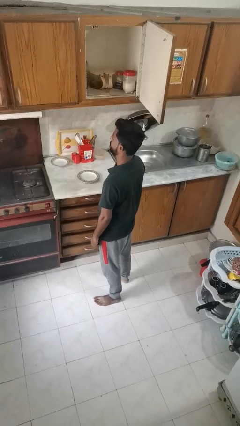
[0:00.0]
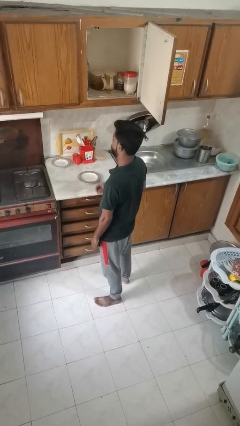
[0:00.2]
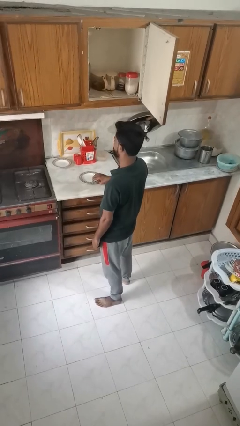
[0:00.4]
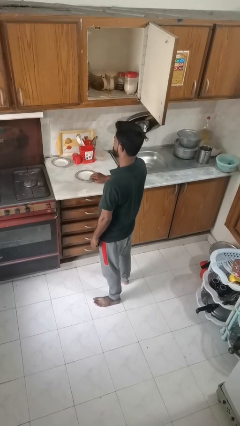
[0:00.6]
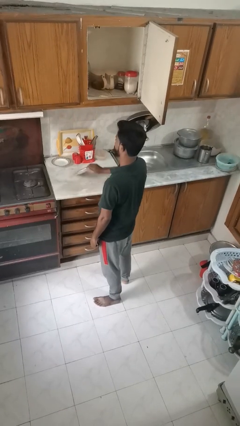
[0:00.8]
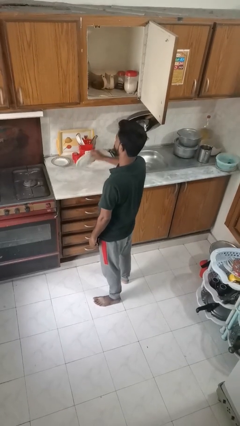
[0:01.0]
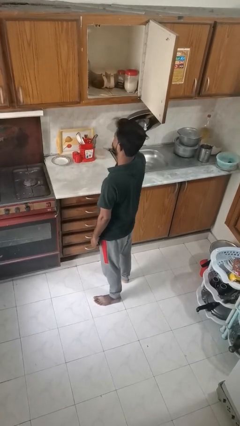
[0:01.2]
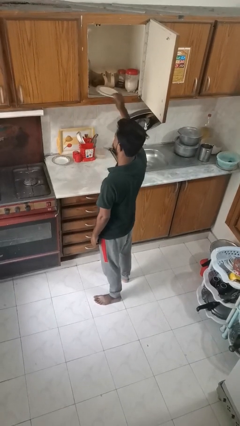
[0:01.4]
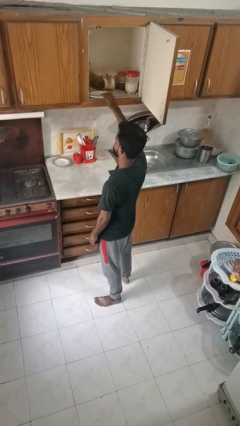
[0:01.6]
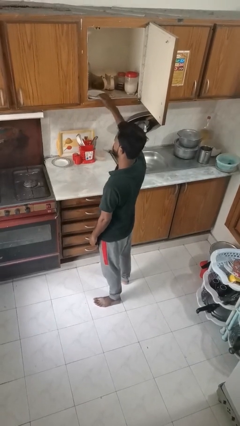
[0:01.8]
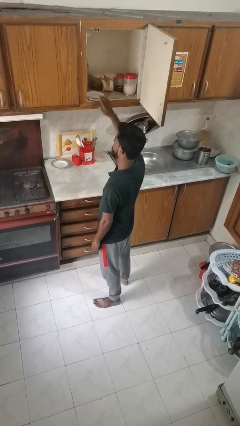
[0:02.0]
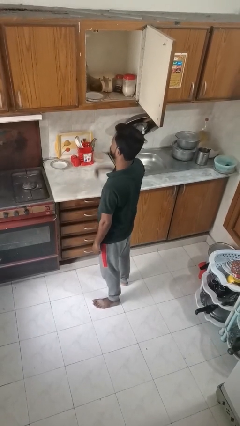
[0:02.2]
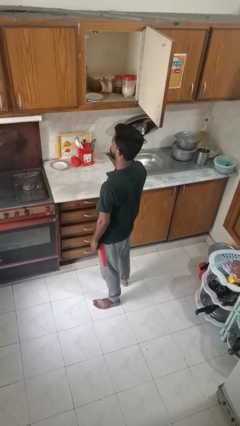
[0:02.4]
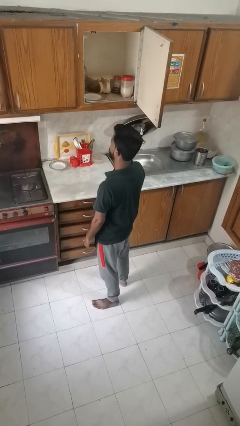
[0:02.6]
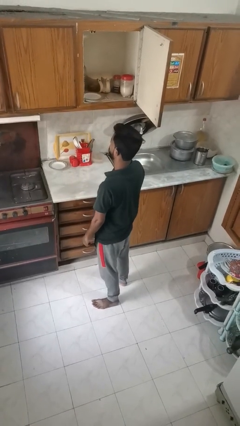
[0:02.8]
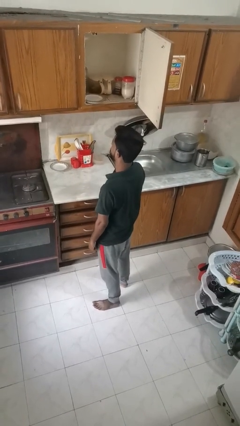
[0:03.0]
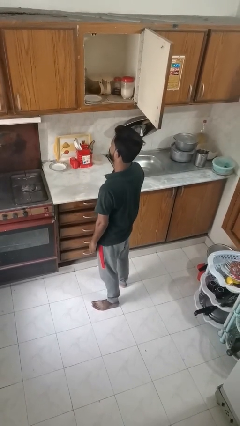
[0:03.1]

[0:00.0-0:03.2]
person puts object in cabinet

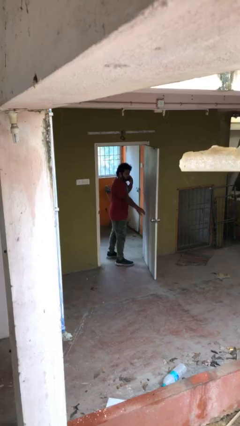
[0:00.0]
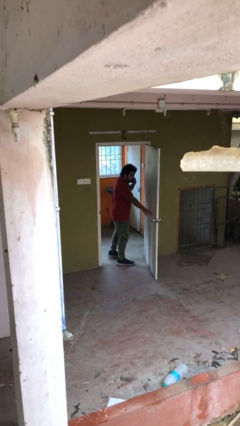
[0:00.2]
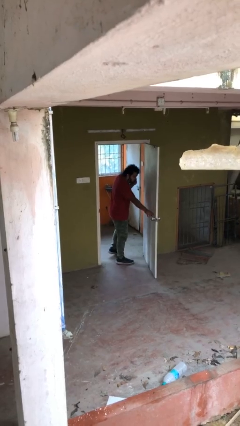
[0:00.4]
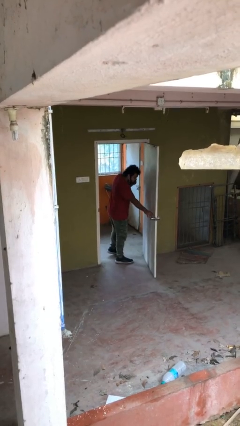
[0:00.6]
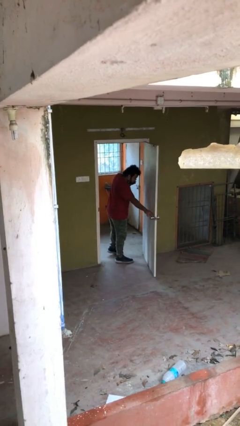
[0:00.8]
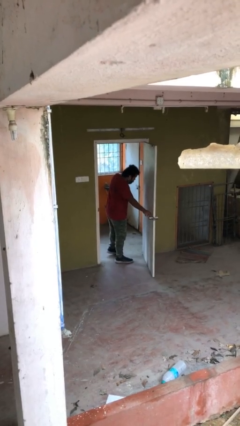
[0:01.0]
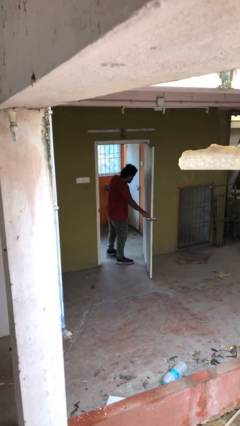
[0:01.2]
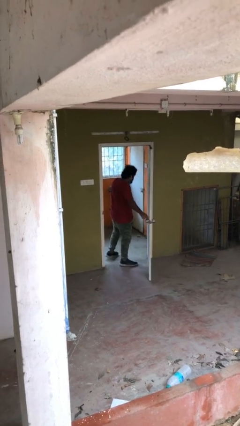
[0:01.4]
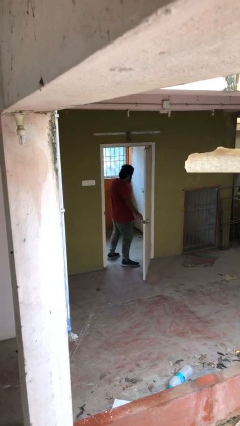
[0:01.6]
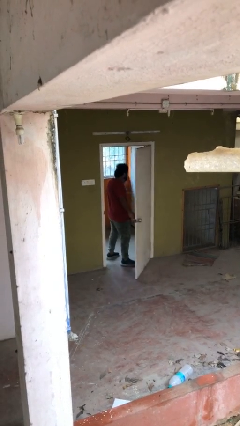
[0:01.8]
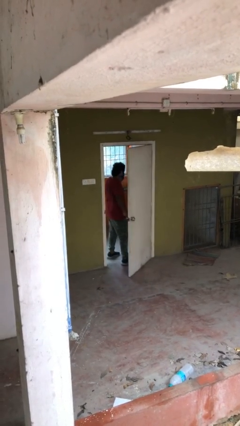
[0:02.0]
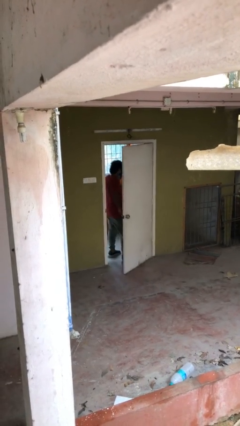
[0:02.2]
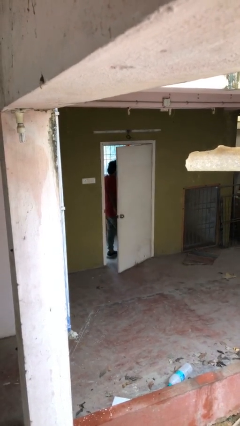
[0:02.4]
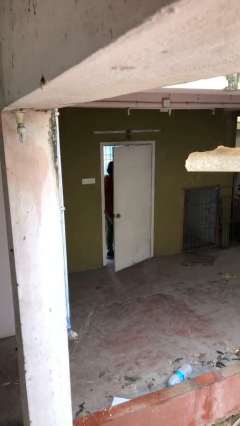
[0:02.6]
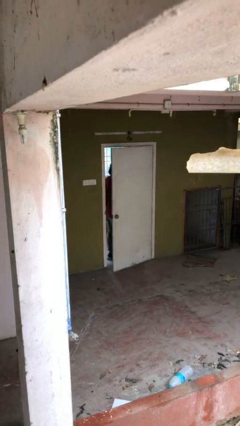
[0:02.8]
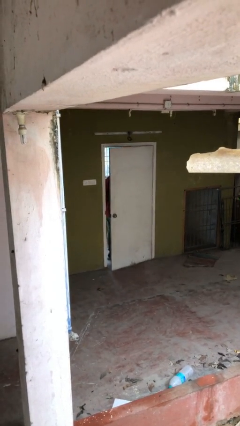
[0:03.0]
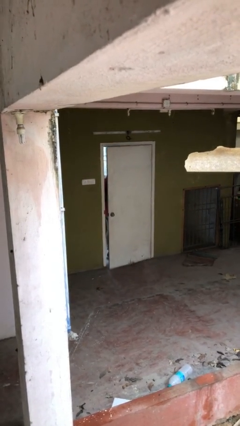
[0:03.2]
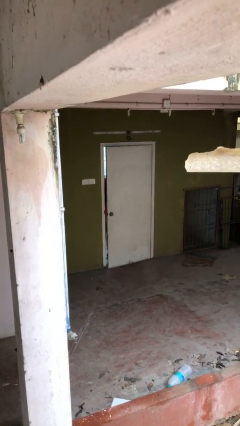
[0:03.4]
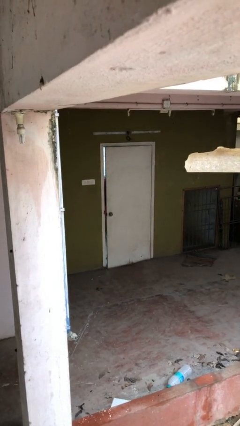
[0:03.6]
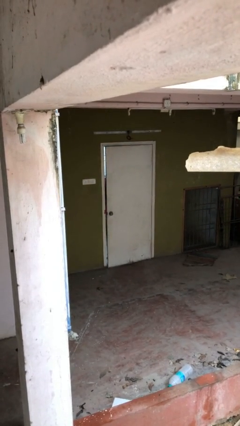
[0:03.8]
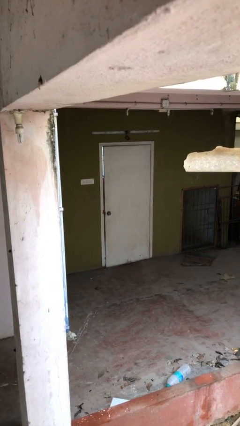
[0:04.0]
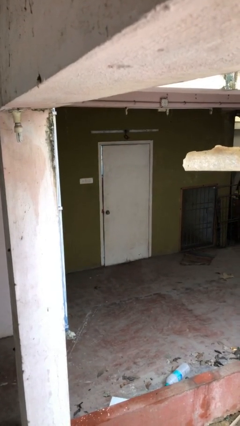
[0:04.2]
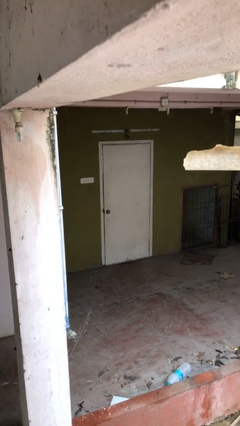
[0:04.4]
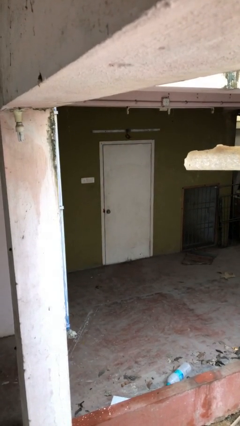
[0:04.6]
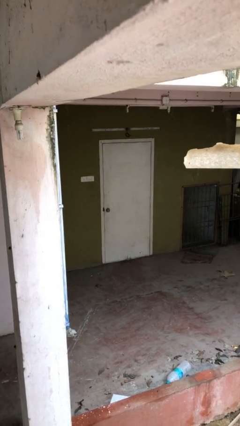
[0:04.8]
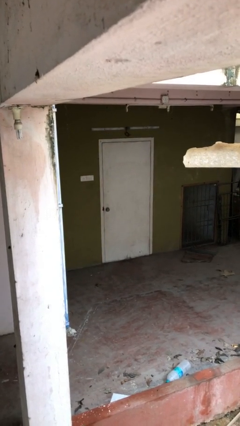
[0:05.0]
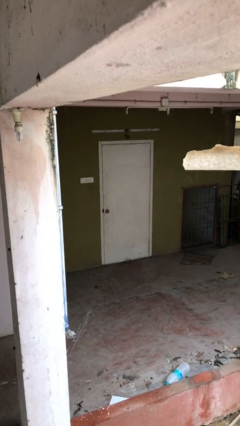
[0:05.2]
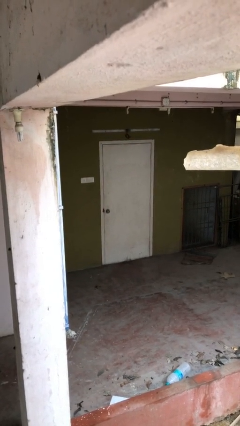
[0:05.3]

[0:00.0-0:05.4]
person closes facility door

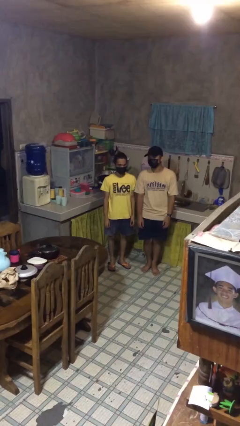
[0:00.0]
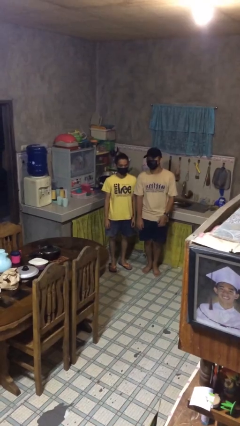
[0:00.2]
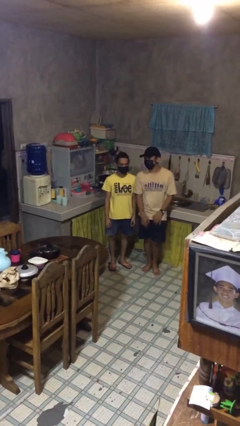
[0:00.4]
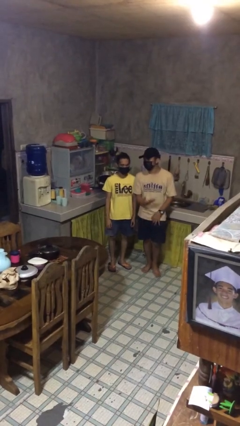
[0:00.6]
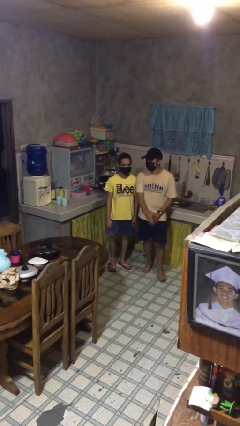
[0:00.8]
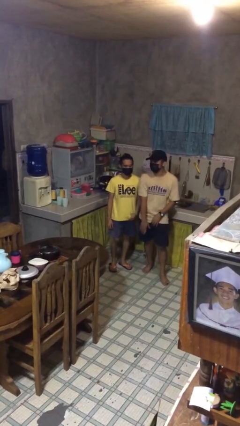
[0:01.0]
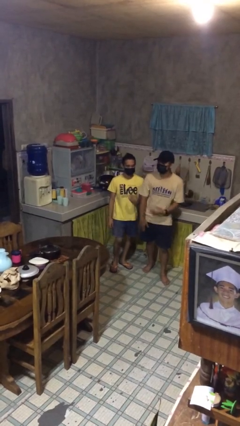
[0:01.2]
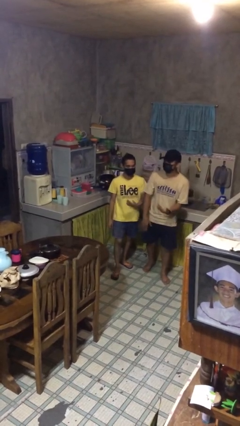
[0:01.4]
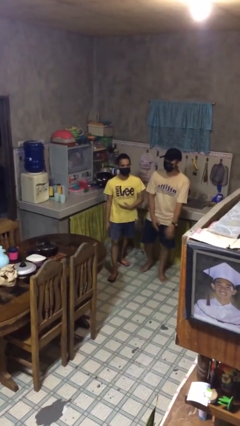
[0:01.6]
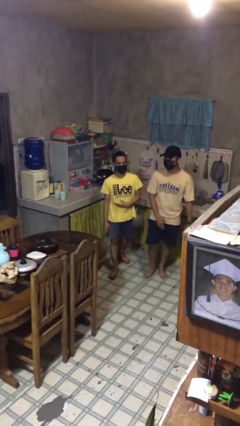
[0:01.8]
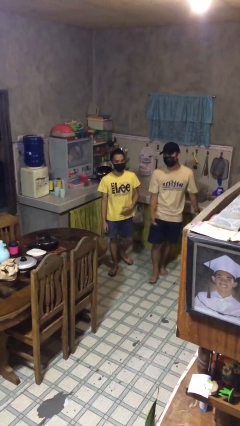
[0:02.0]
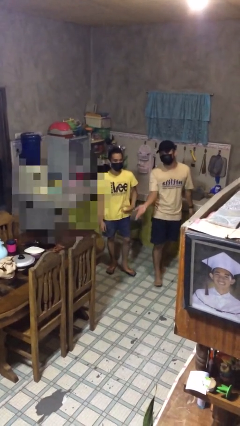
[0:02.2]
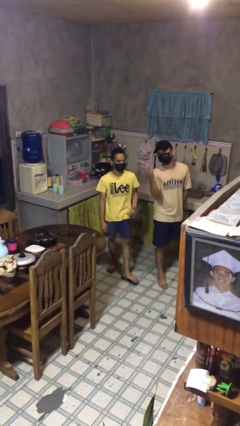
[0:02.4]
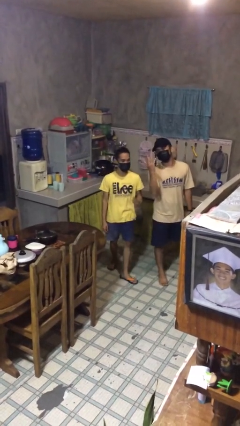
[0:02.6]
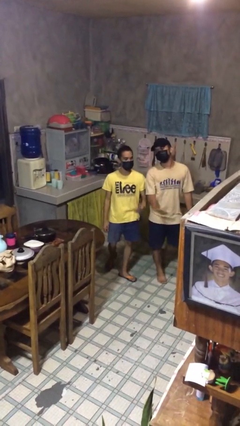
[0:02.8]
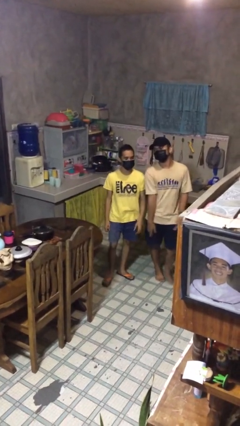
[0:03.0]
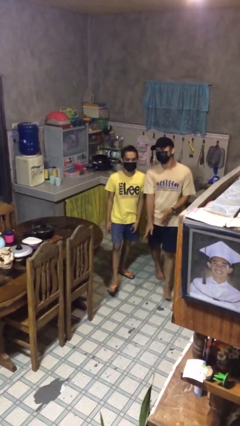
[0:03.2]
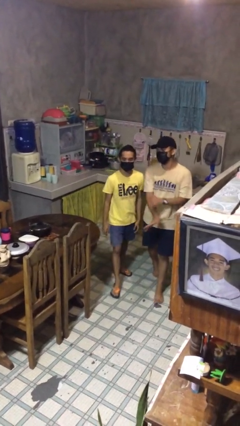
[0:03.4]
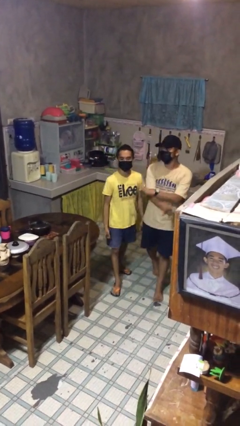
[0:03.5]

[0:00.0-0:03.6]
person talks to person

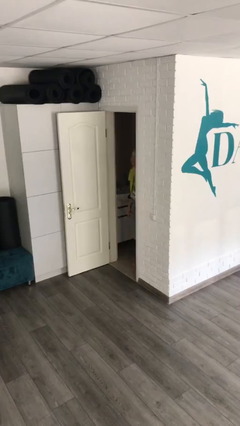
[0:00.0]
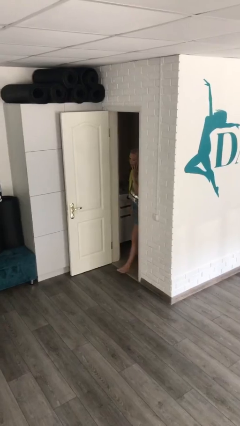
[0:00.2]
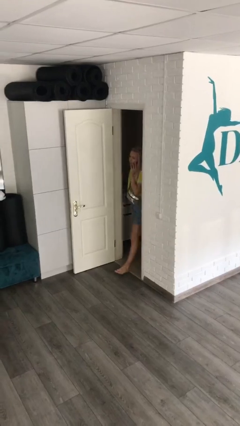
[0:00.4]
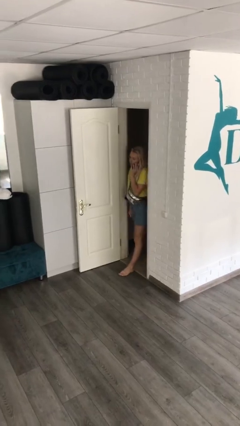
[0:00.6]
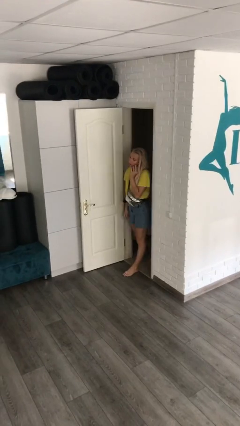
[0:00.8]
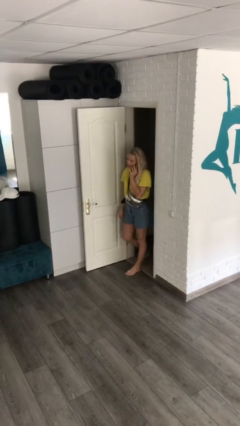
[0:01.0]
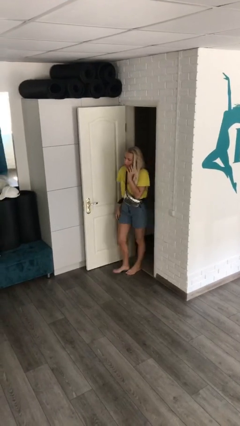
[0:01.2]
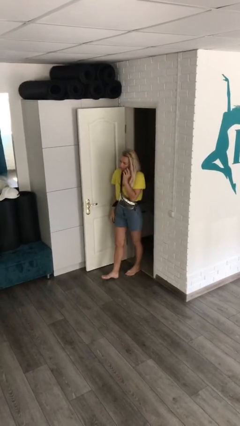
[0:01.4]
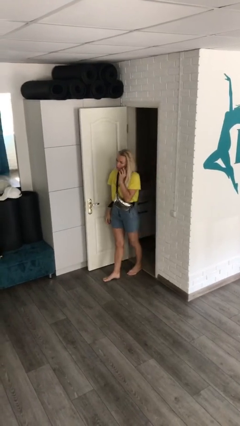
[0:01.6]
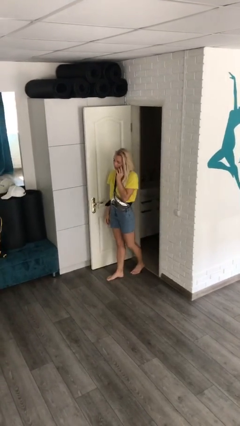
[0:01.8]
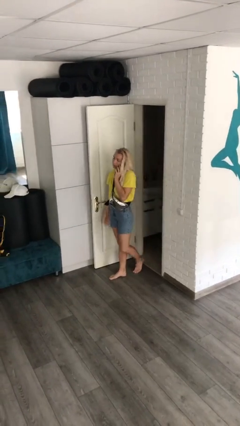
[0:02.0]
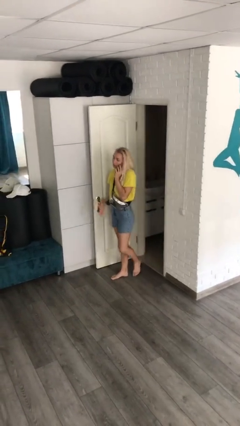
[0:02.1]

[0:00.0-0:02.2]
person enters scene through structure

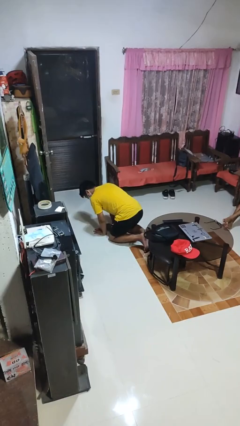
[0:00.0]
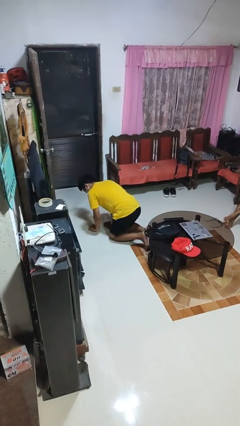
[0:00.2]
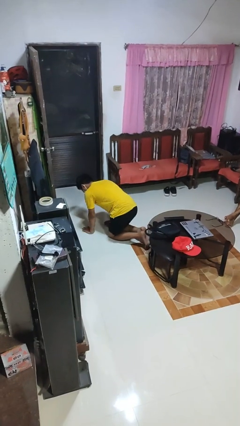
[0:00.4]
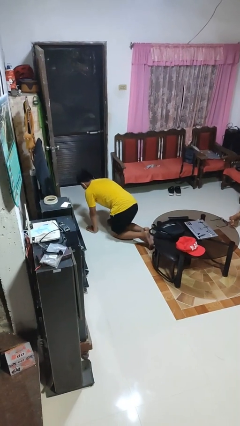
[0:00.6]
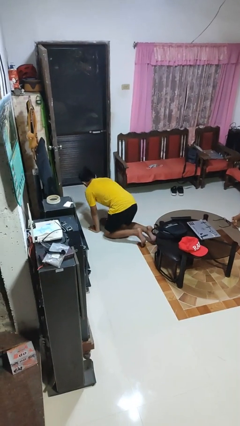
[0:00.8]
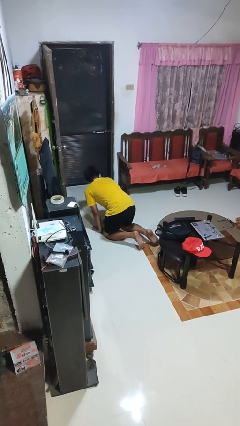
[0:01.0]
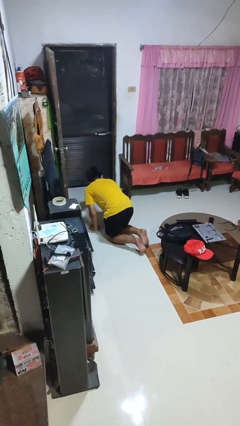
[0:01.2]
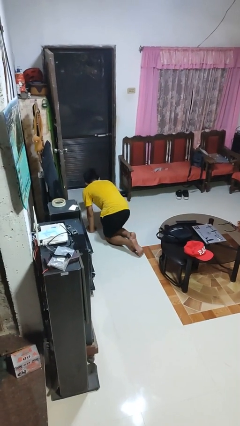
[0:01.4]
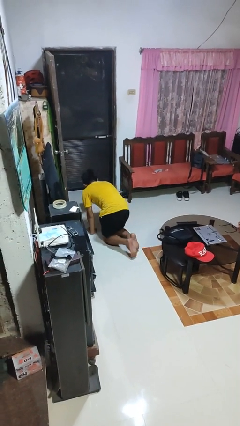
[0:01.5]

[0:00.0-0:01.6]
person crawls

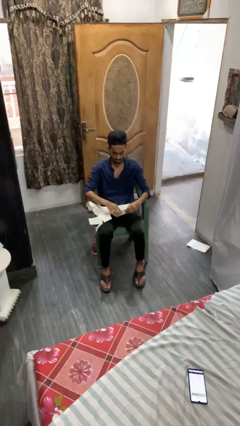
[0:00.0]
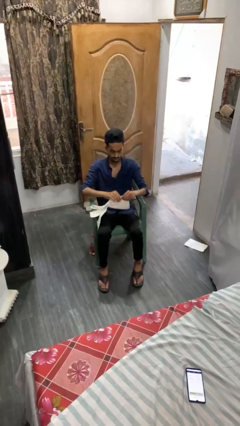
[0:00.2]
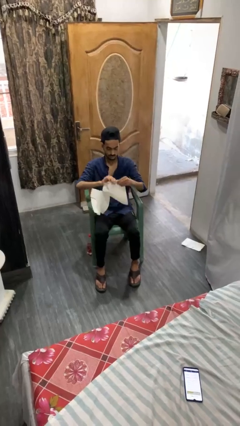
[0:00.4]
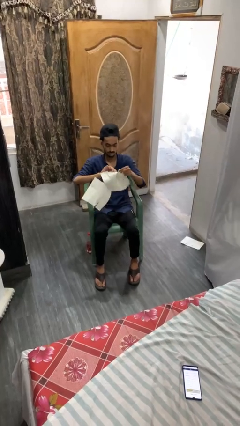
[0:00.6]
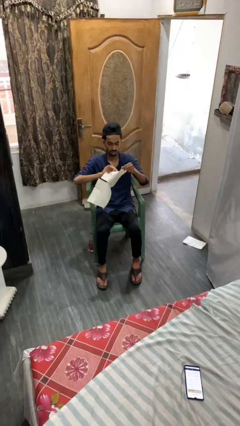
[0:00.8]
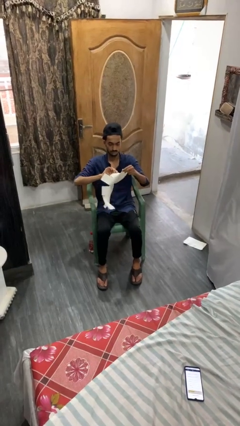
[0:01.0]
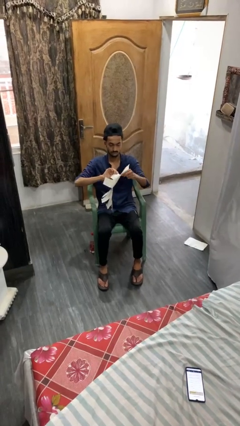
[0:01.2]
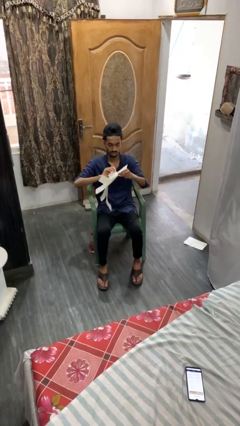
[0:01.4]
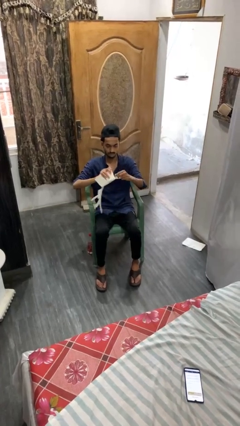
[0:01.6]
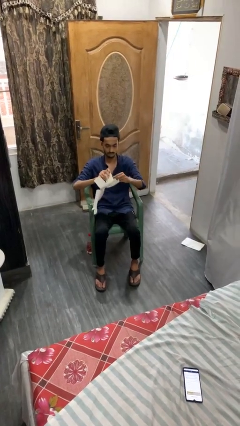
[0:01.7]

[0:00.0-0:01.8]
person tears paper
